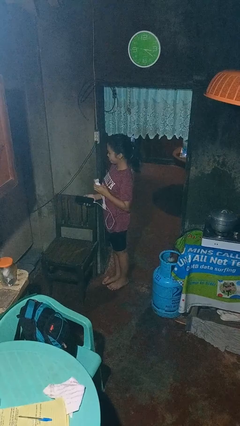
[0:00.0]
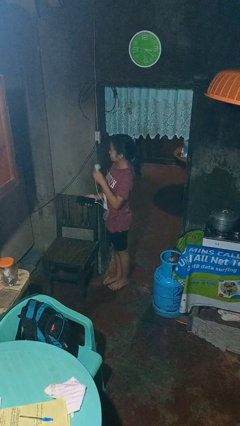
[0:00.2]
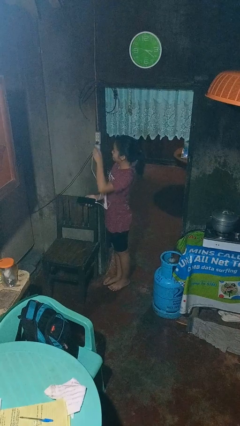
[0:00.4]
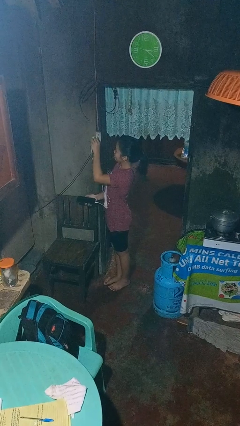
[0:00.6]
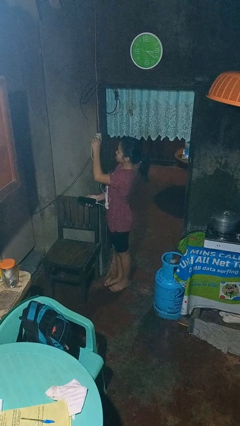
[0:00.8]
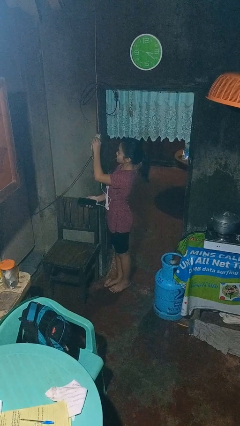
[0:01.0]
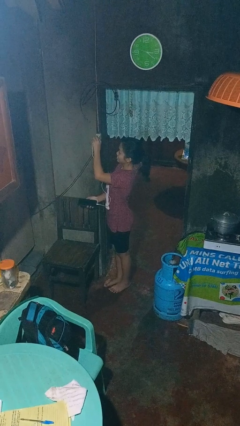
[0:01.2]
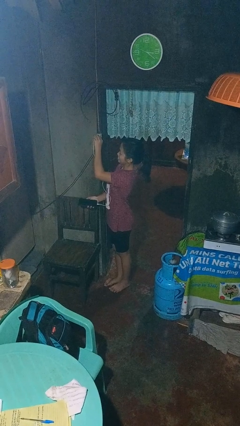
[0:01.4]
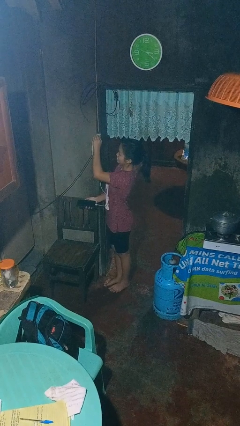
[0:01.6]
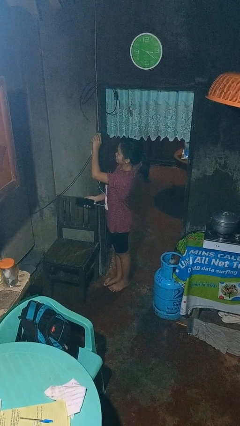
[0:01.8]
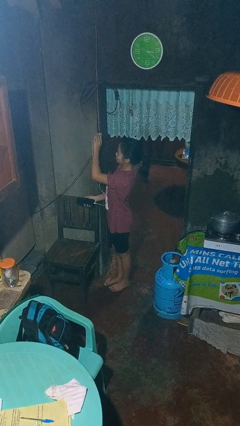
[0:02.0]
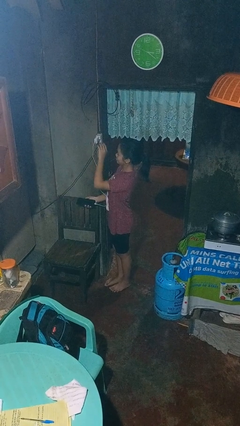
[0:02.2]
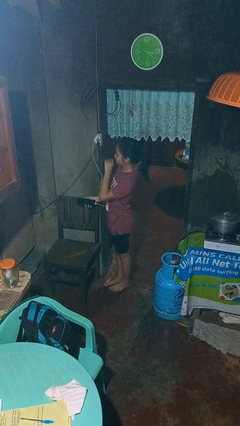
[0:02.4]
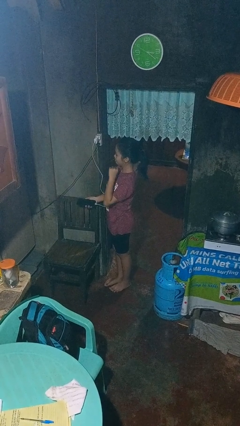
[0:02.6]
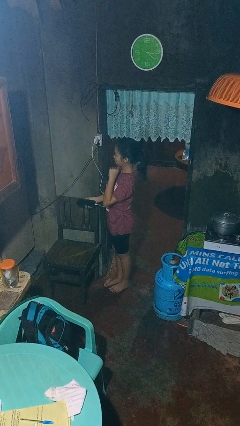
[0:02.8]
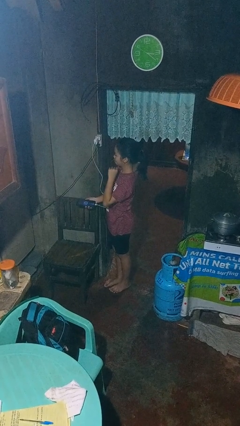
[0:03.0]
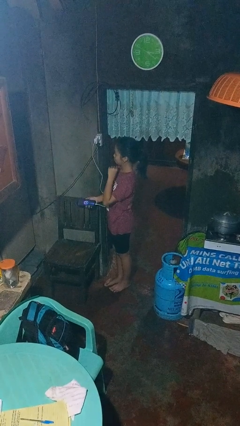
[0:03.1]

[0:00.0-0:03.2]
person plugs into electrical socket

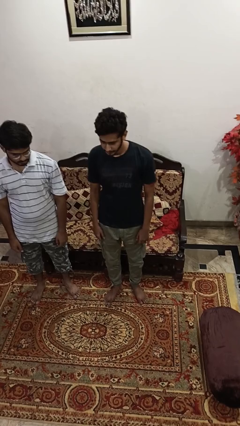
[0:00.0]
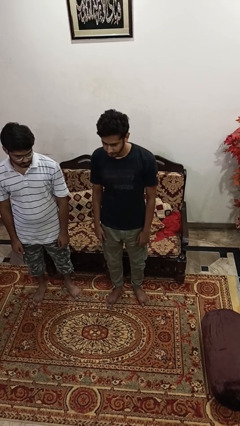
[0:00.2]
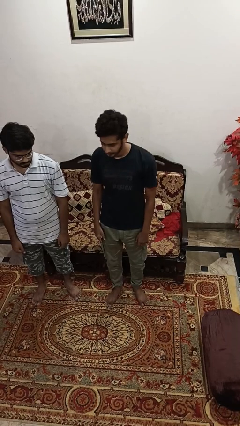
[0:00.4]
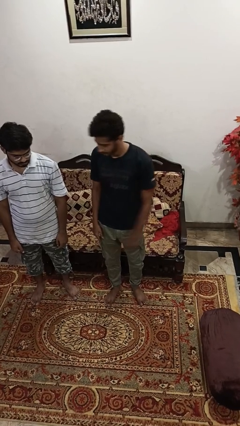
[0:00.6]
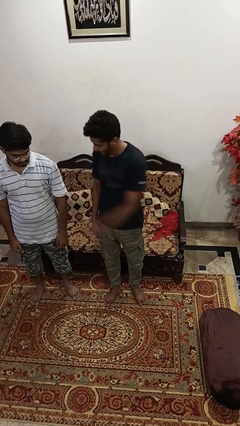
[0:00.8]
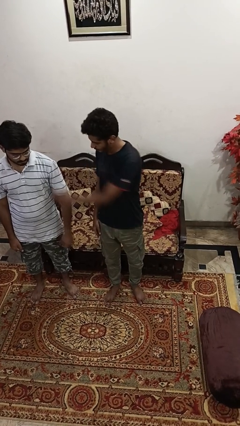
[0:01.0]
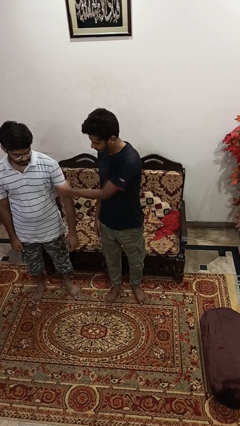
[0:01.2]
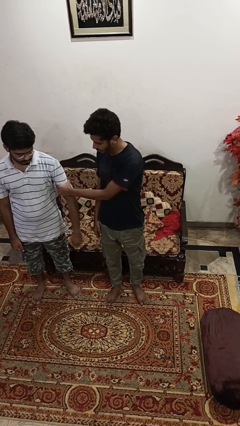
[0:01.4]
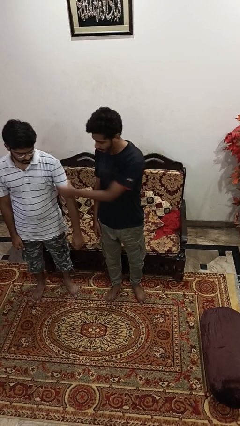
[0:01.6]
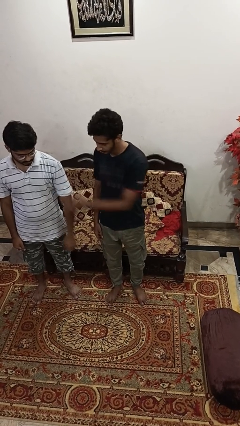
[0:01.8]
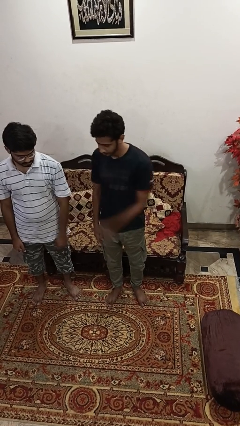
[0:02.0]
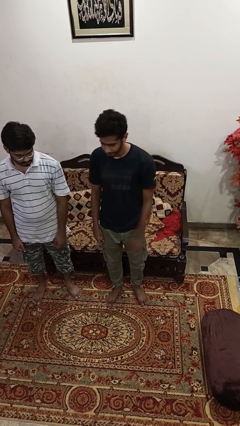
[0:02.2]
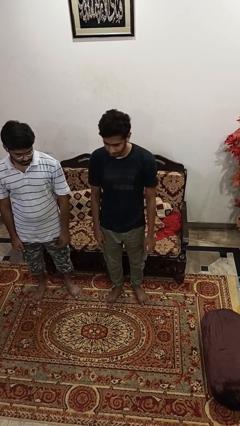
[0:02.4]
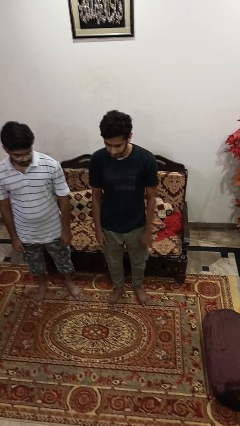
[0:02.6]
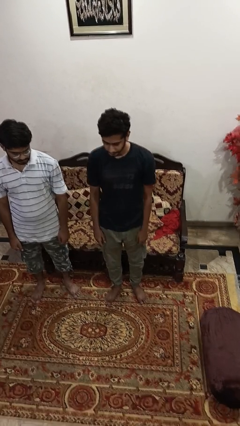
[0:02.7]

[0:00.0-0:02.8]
person grabs person by bicep

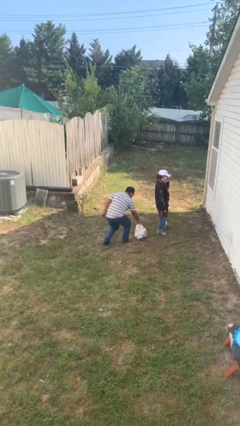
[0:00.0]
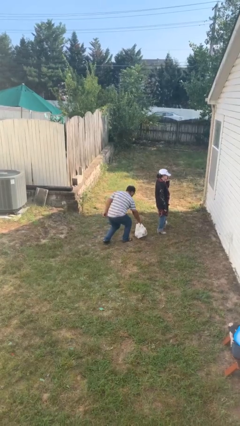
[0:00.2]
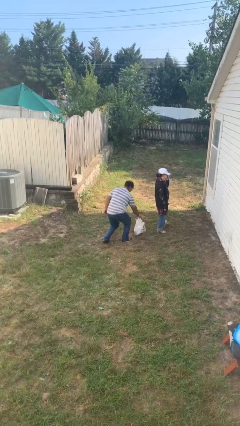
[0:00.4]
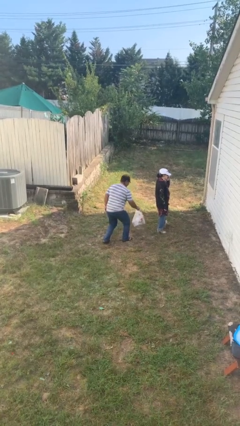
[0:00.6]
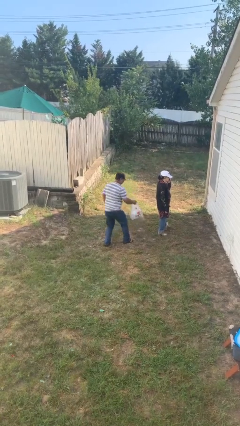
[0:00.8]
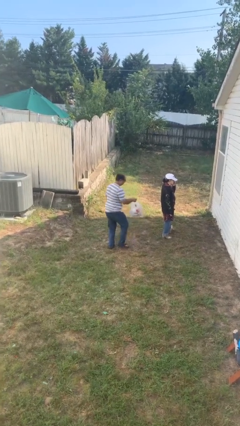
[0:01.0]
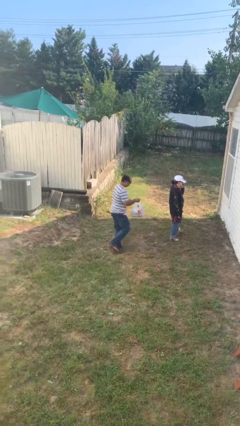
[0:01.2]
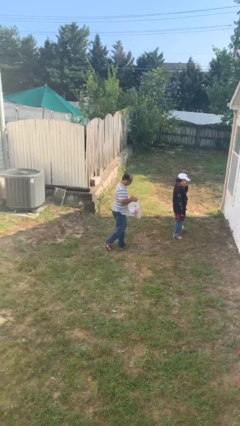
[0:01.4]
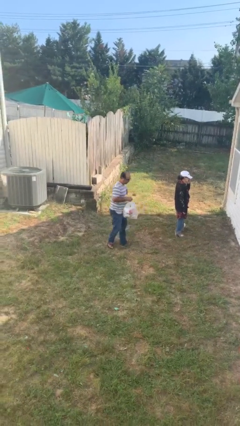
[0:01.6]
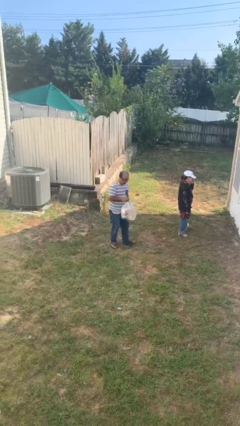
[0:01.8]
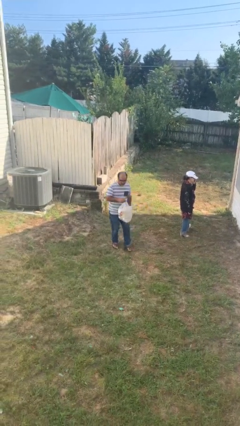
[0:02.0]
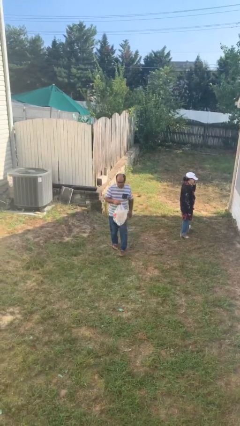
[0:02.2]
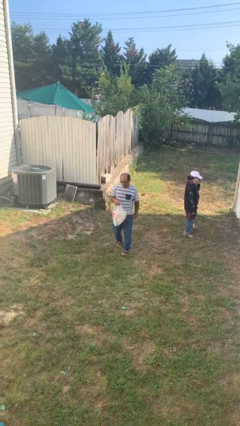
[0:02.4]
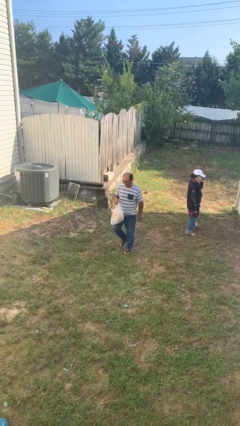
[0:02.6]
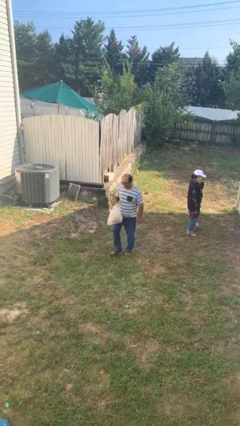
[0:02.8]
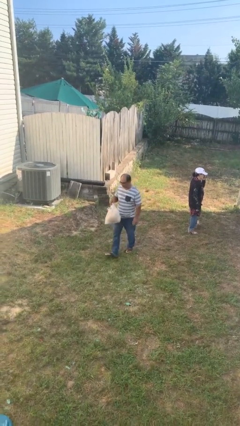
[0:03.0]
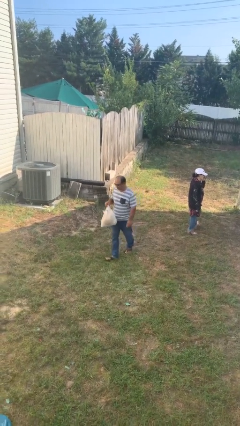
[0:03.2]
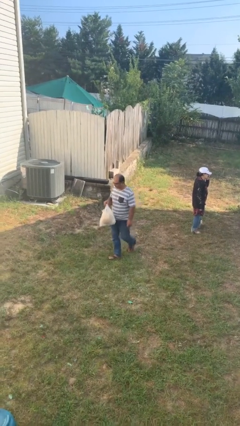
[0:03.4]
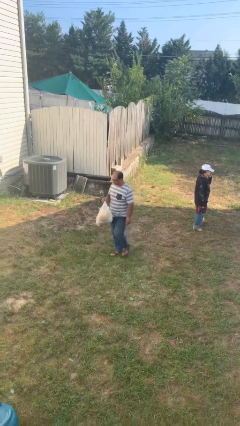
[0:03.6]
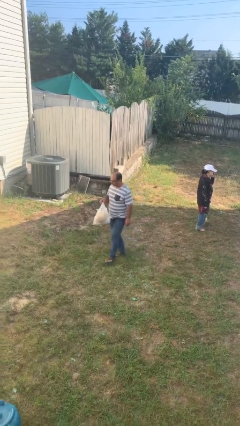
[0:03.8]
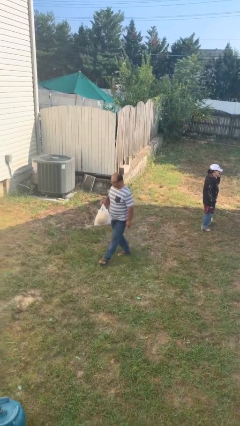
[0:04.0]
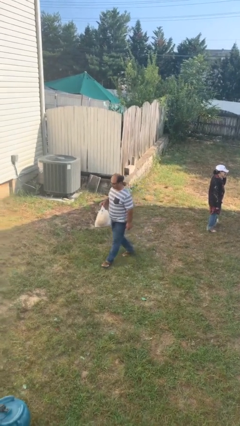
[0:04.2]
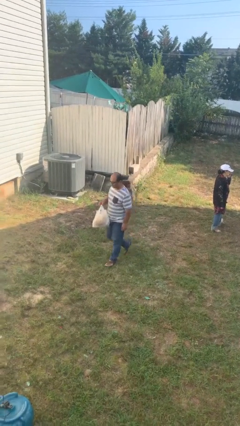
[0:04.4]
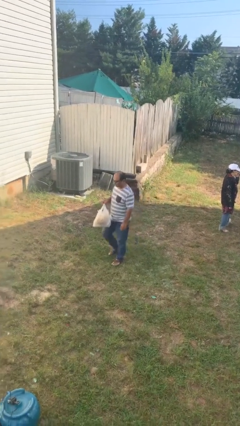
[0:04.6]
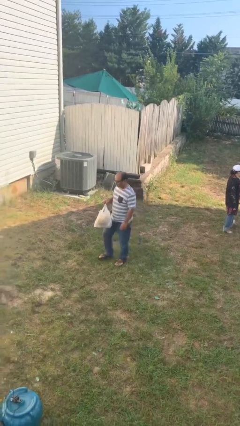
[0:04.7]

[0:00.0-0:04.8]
person steals object from person

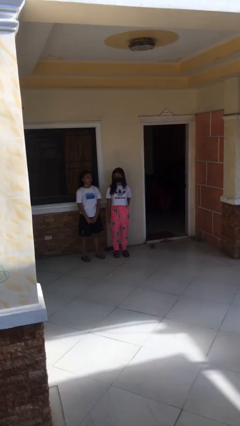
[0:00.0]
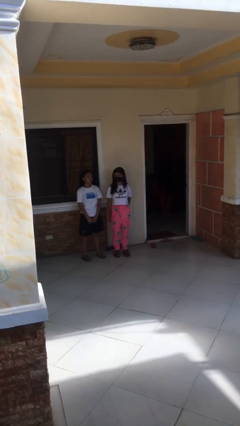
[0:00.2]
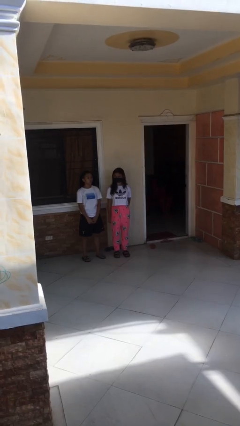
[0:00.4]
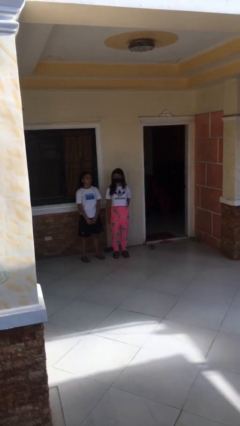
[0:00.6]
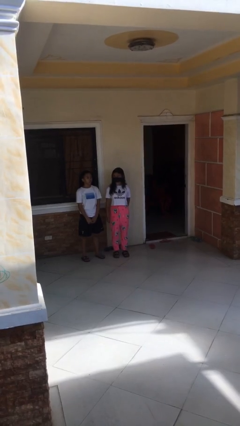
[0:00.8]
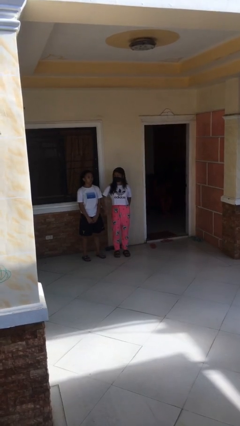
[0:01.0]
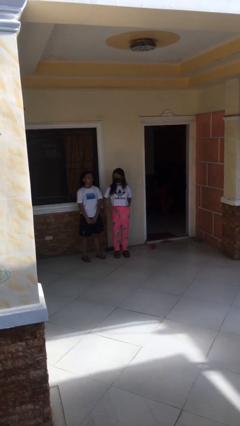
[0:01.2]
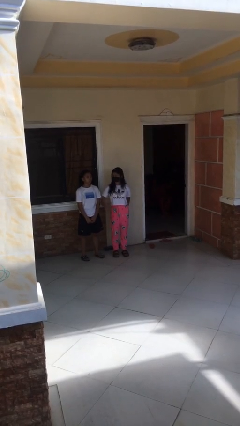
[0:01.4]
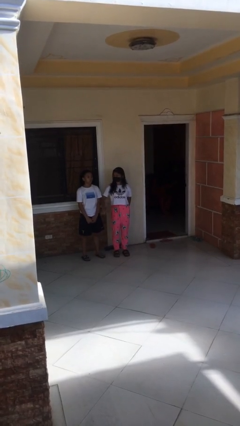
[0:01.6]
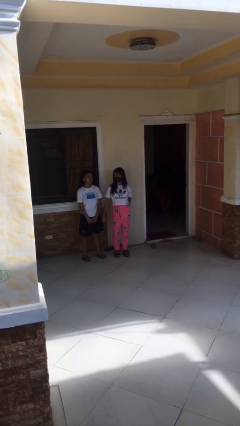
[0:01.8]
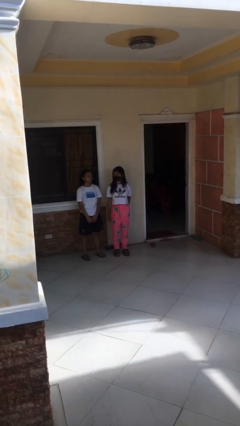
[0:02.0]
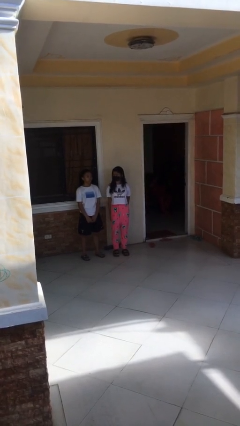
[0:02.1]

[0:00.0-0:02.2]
person nudges person with elbow

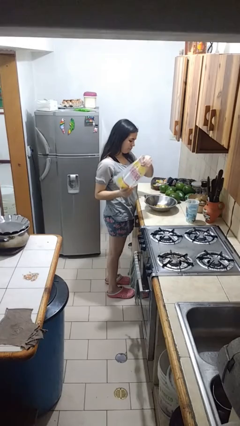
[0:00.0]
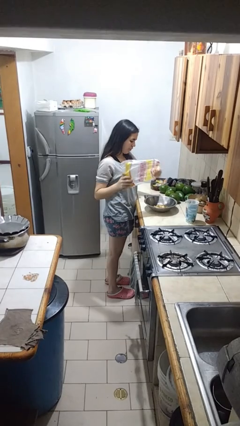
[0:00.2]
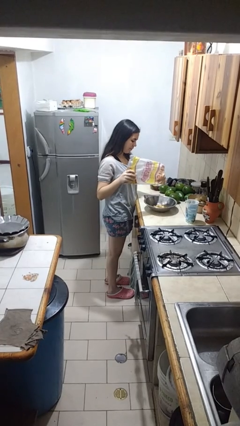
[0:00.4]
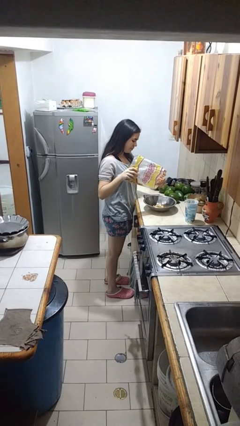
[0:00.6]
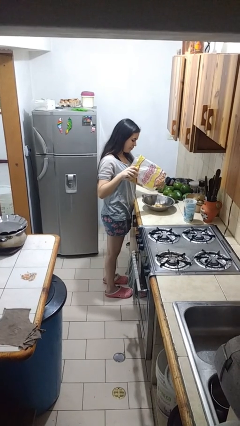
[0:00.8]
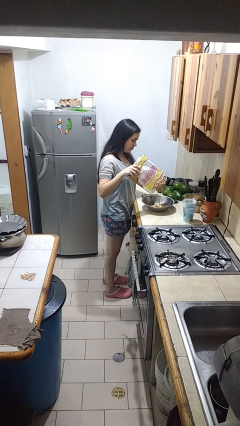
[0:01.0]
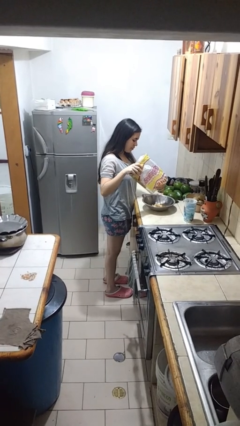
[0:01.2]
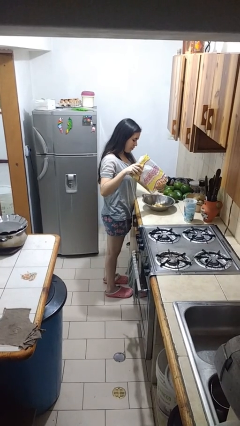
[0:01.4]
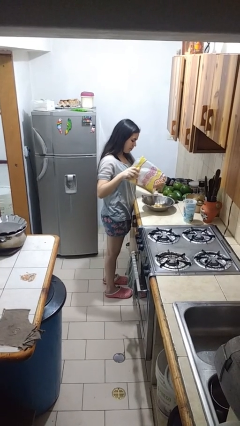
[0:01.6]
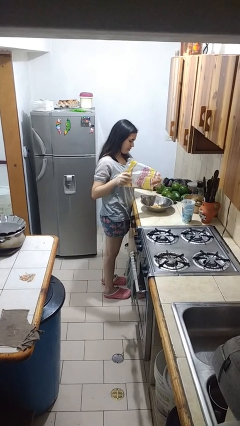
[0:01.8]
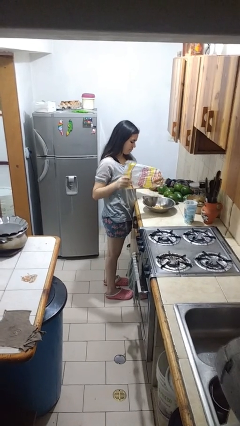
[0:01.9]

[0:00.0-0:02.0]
person pours into bowl

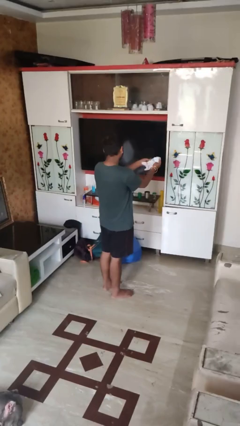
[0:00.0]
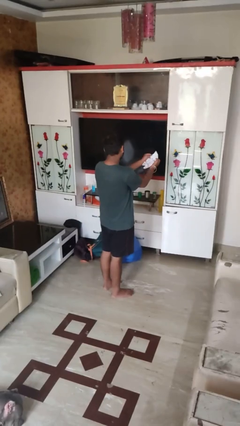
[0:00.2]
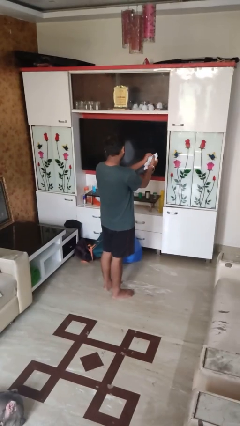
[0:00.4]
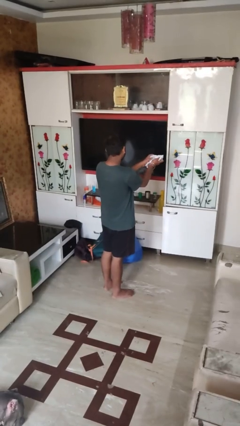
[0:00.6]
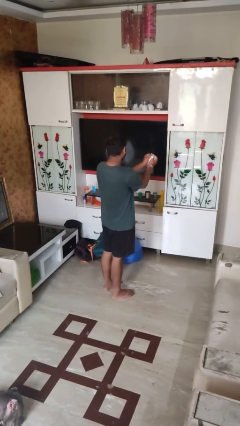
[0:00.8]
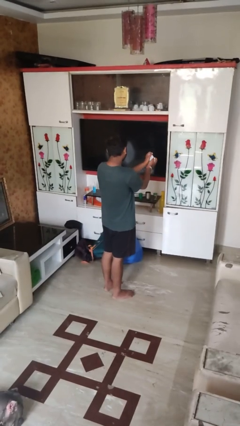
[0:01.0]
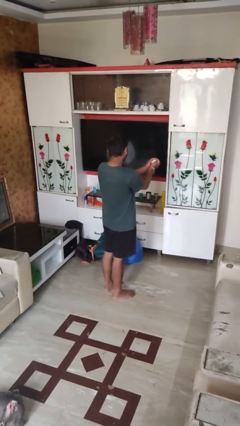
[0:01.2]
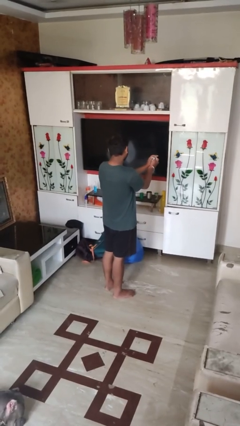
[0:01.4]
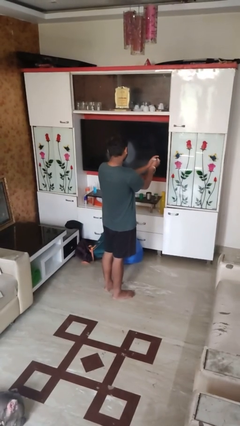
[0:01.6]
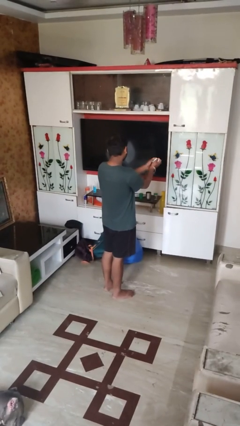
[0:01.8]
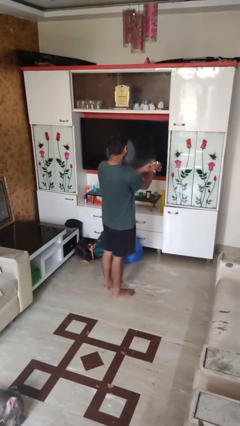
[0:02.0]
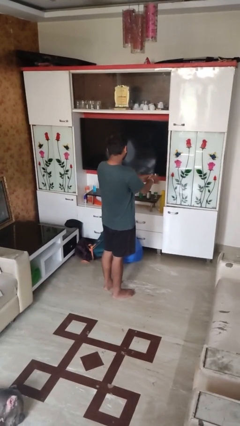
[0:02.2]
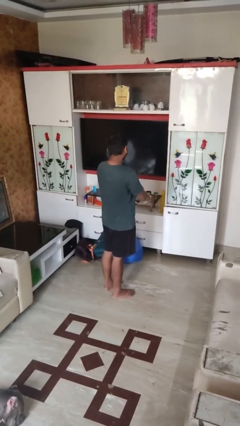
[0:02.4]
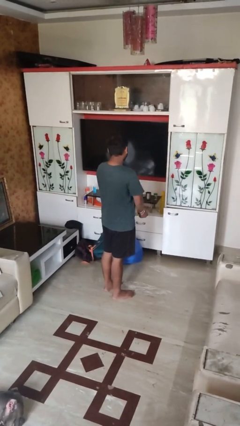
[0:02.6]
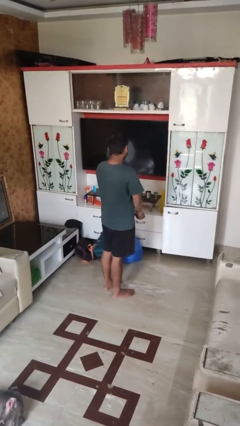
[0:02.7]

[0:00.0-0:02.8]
person crumples paper
